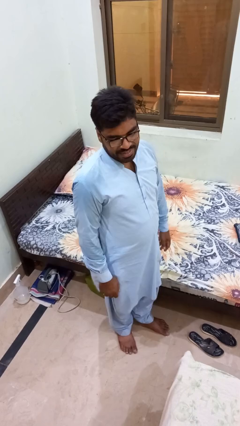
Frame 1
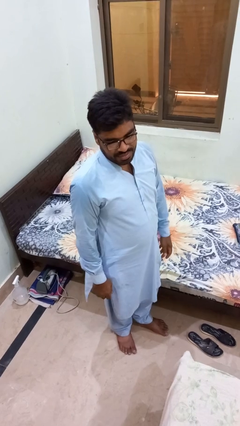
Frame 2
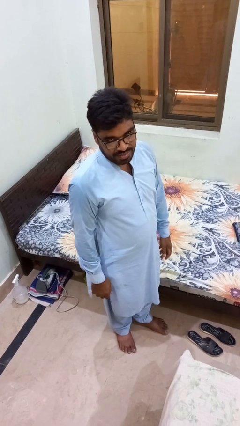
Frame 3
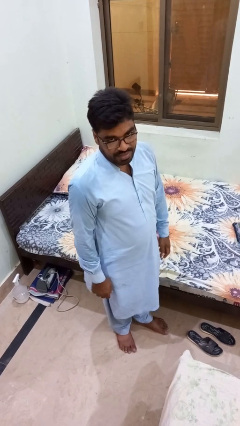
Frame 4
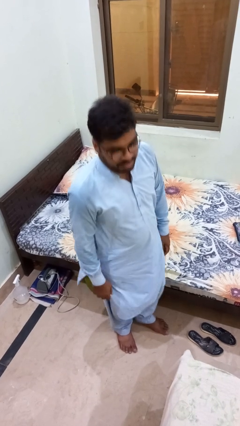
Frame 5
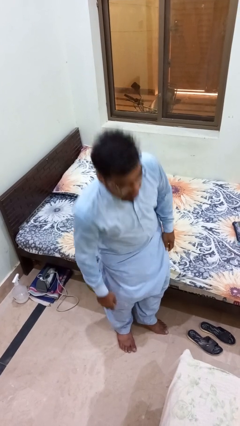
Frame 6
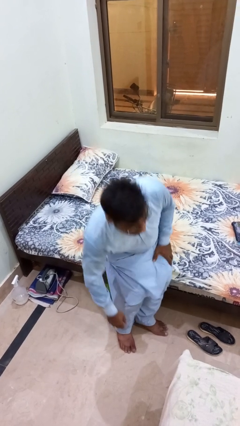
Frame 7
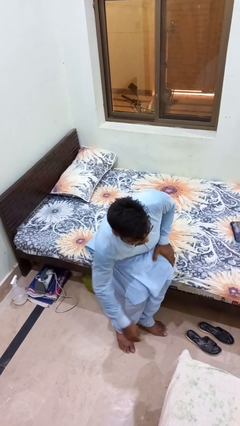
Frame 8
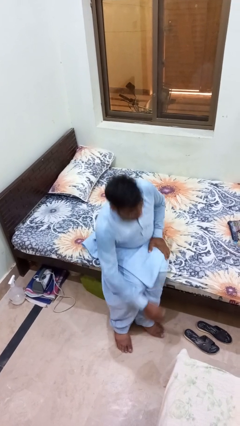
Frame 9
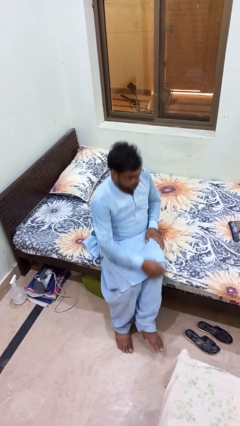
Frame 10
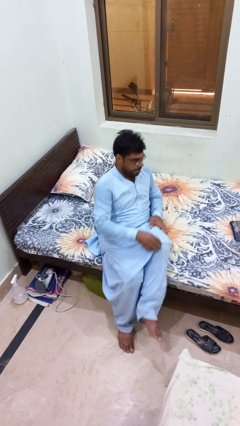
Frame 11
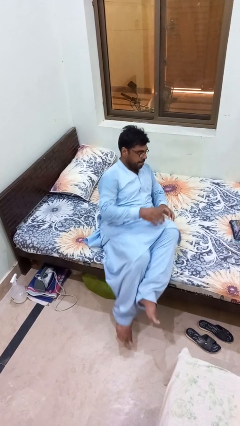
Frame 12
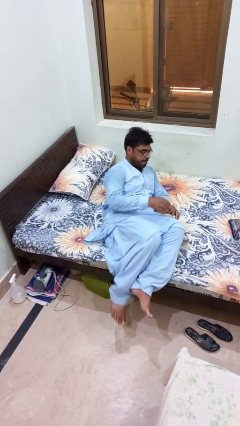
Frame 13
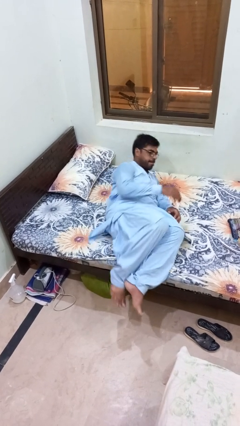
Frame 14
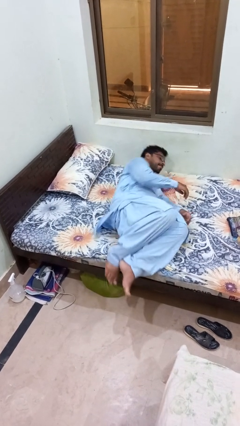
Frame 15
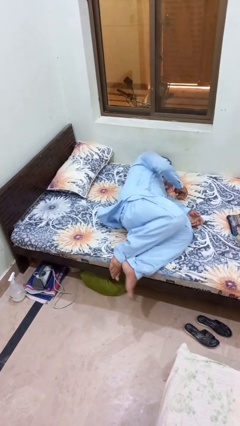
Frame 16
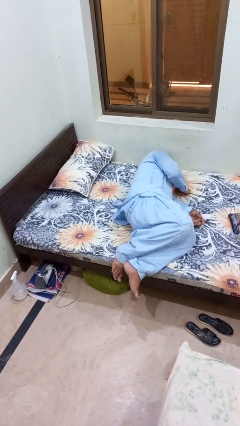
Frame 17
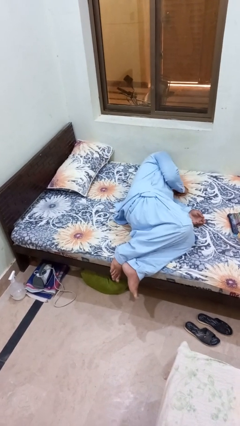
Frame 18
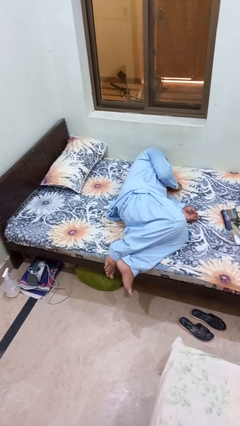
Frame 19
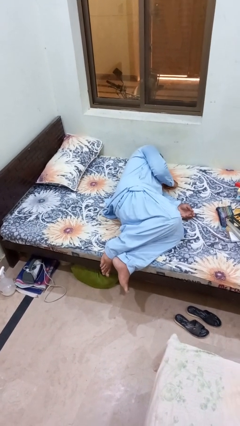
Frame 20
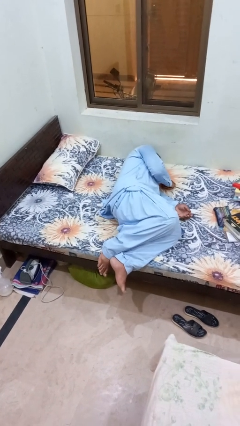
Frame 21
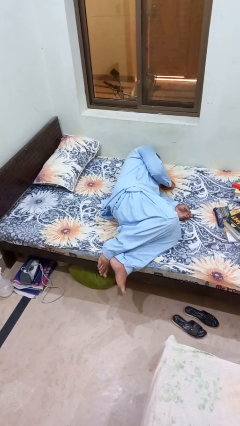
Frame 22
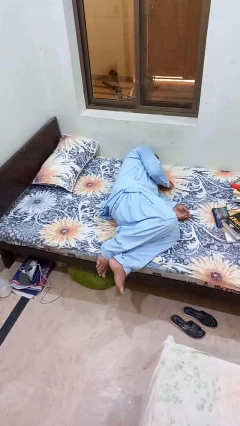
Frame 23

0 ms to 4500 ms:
person lies down on bed

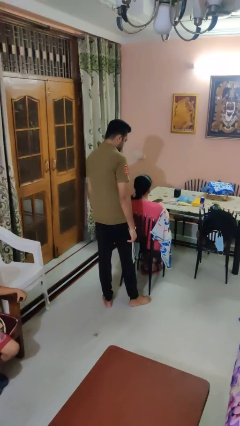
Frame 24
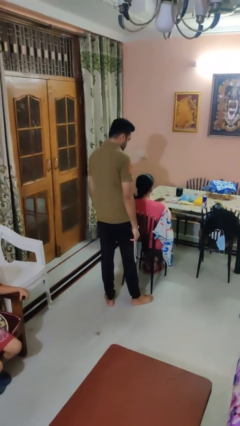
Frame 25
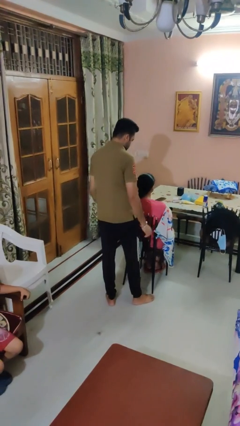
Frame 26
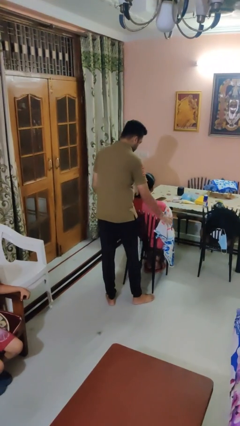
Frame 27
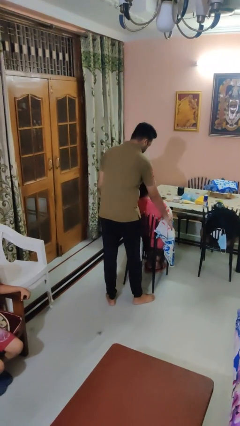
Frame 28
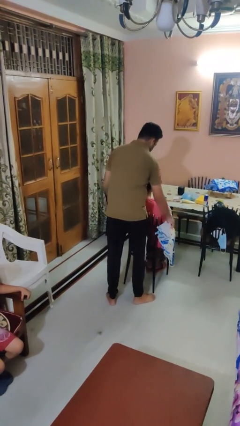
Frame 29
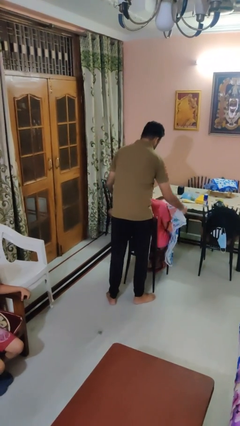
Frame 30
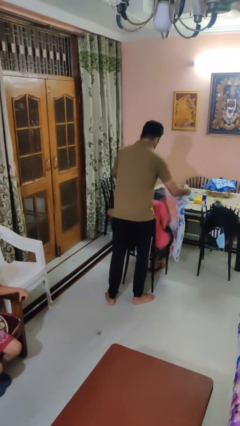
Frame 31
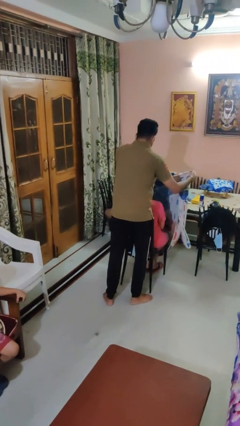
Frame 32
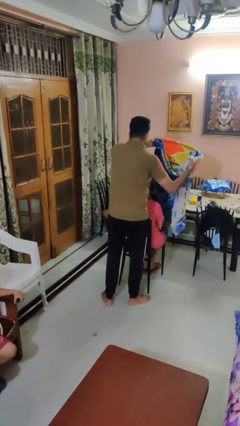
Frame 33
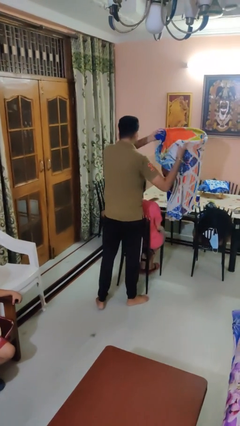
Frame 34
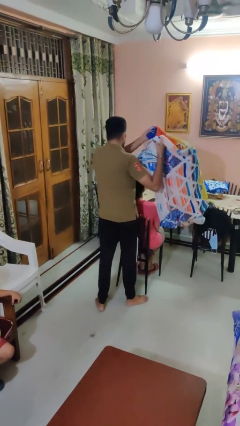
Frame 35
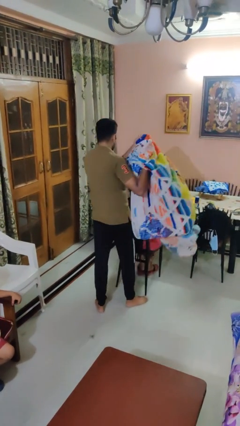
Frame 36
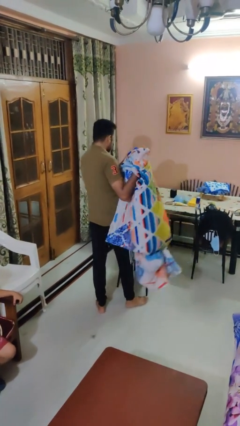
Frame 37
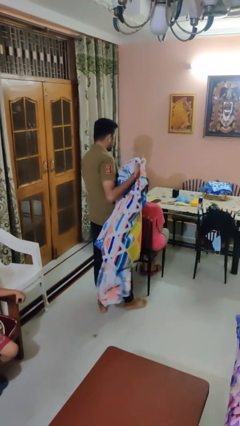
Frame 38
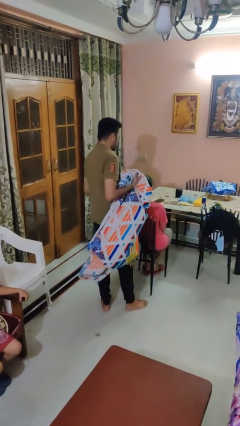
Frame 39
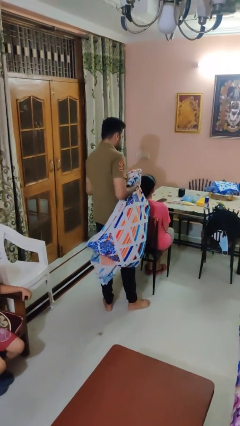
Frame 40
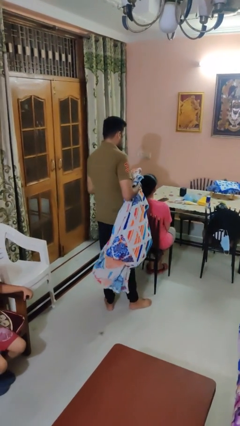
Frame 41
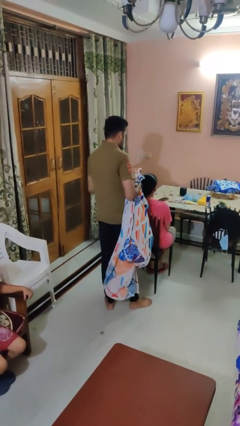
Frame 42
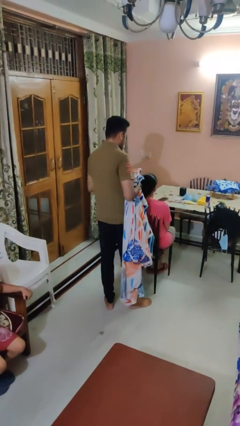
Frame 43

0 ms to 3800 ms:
person uncovers friend with blanket

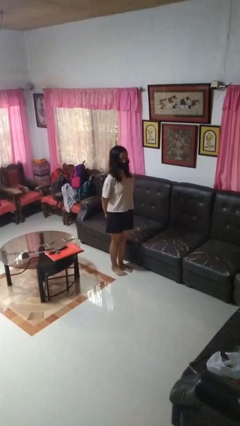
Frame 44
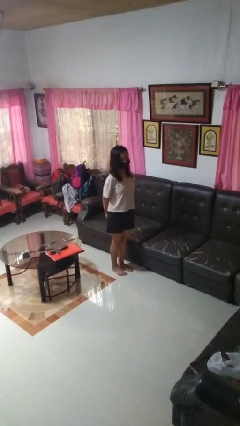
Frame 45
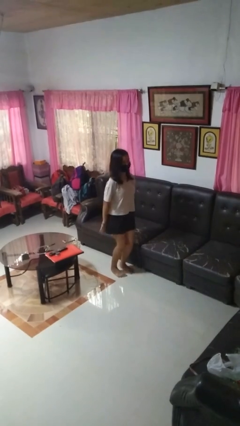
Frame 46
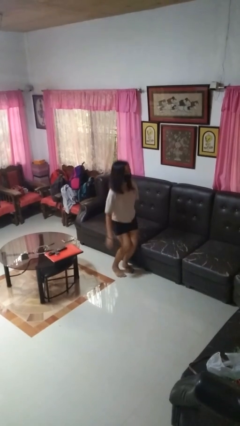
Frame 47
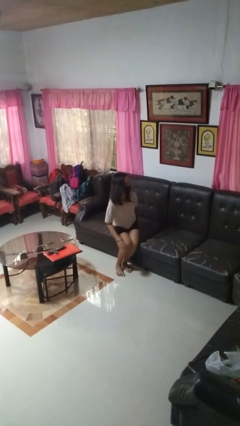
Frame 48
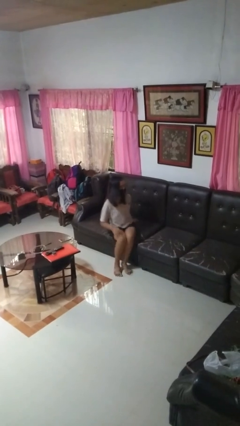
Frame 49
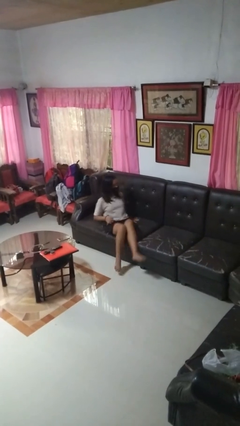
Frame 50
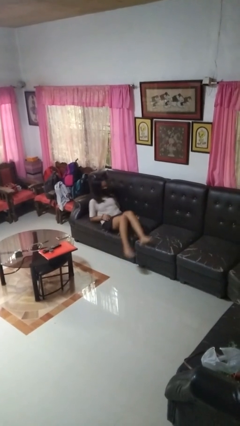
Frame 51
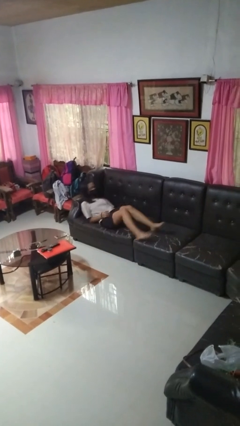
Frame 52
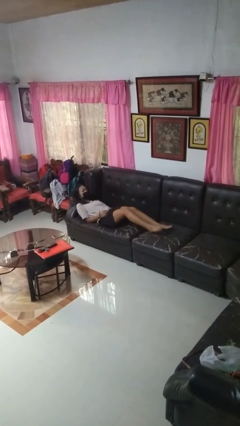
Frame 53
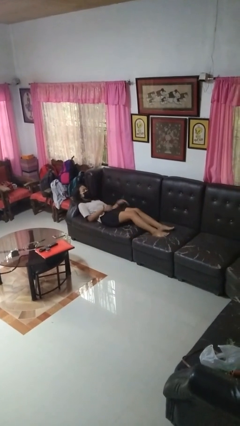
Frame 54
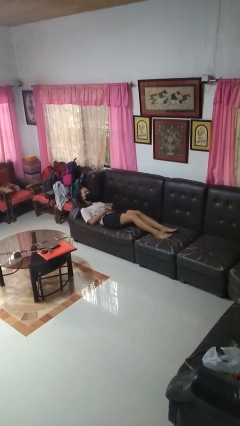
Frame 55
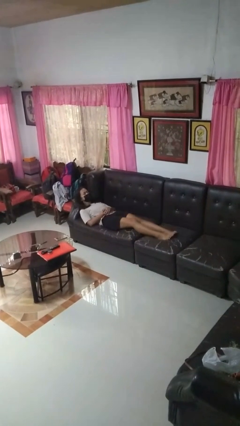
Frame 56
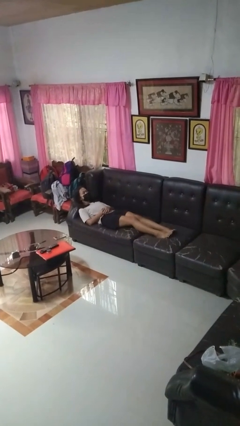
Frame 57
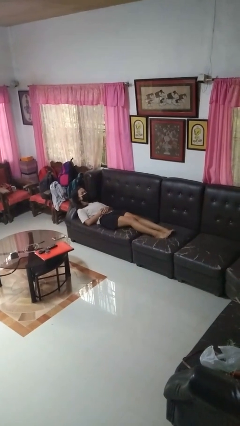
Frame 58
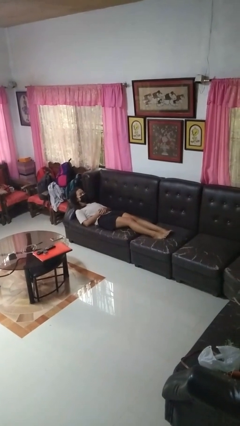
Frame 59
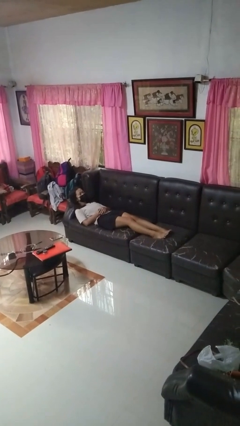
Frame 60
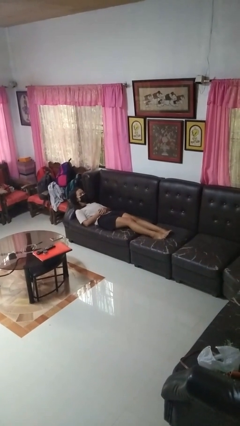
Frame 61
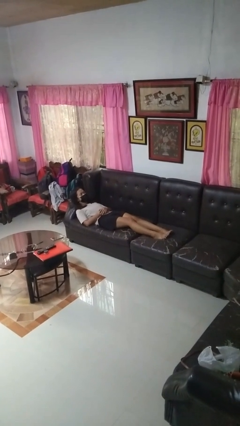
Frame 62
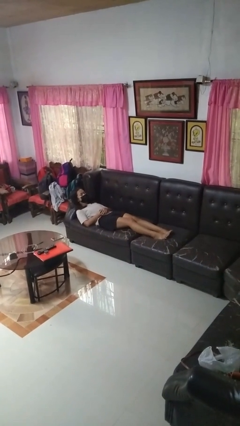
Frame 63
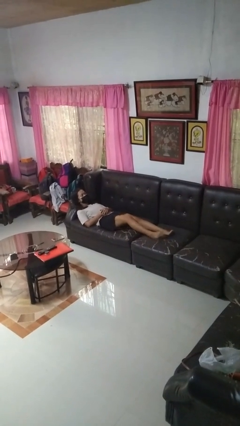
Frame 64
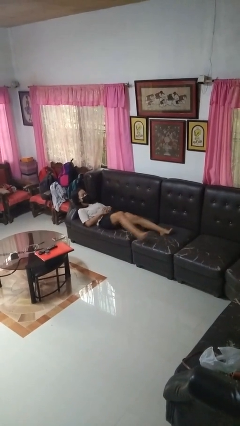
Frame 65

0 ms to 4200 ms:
person lies down on couch

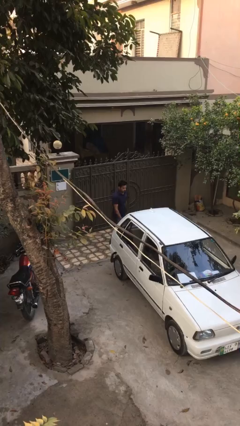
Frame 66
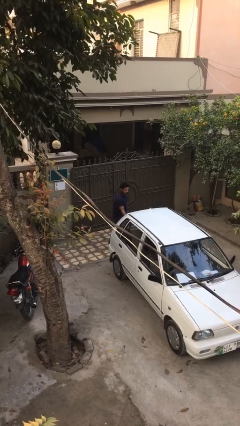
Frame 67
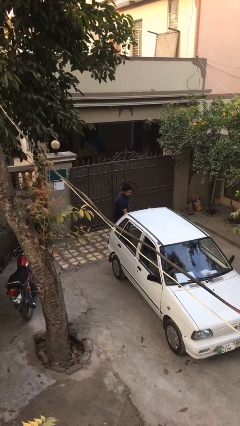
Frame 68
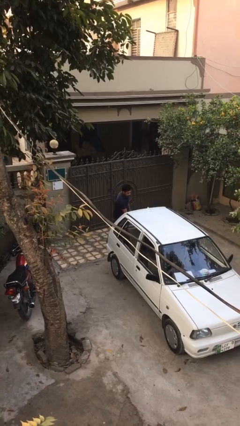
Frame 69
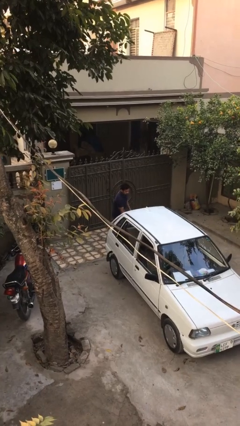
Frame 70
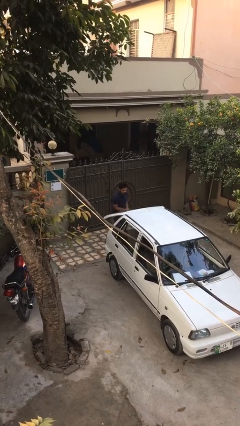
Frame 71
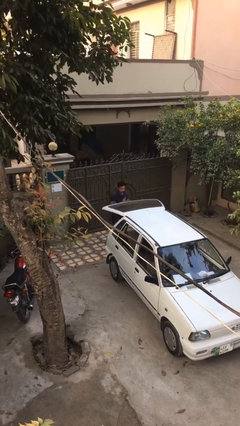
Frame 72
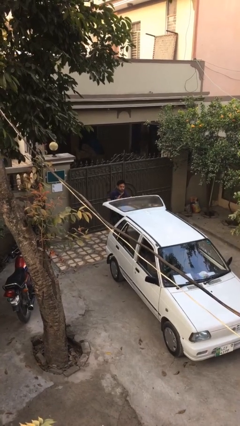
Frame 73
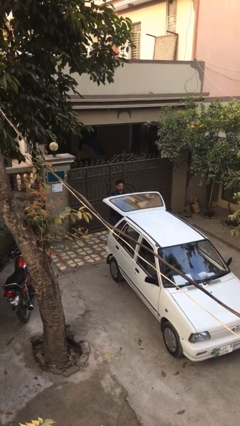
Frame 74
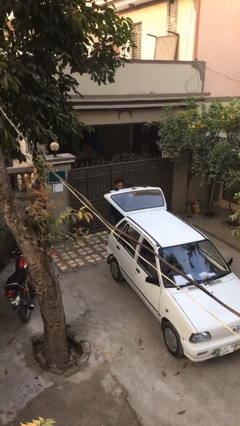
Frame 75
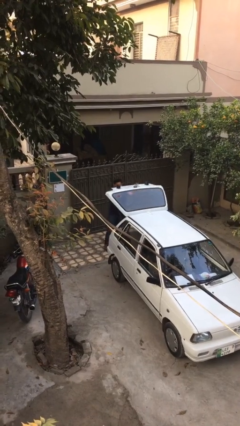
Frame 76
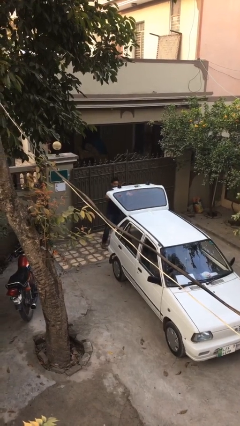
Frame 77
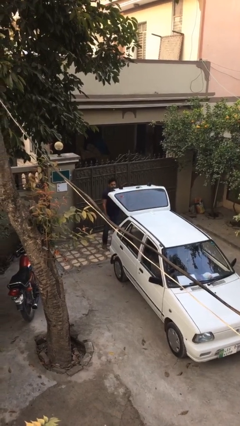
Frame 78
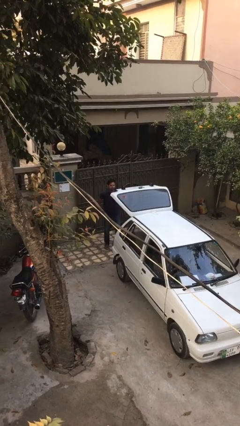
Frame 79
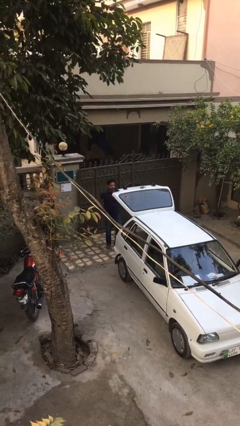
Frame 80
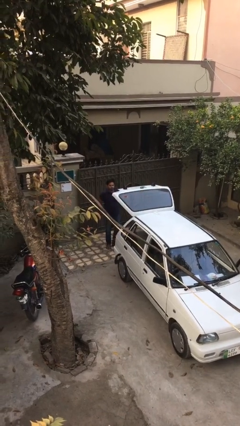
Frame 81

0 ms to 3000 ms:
person opens car trunk

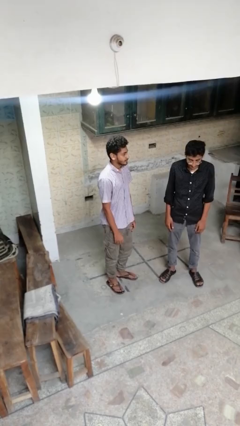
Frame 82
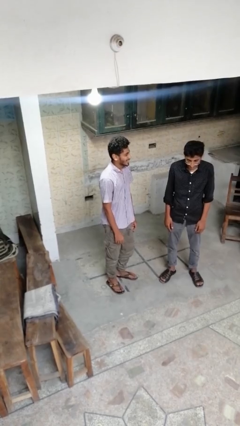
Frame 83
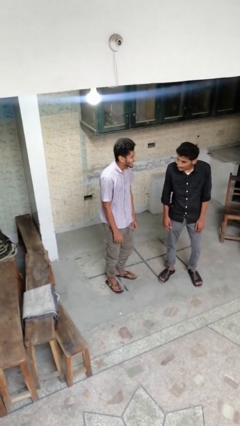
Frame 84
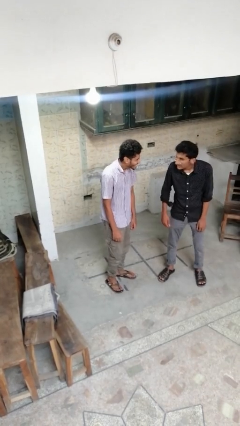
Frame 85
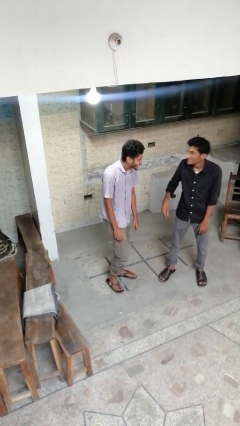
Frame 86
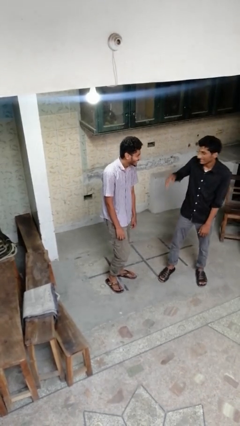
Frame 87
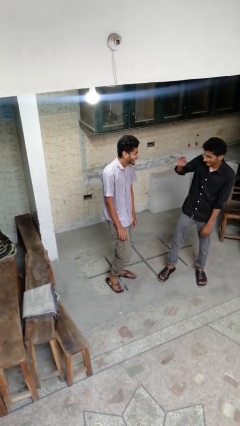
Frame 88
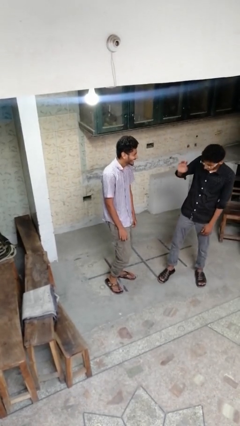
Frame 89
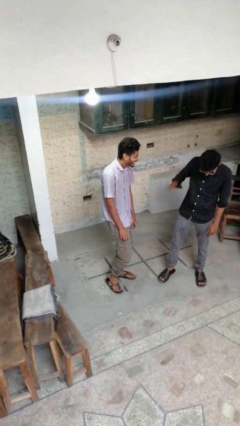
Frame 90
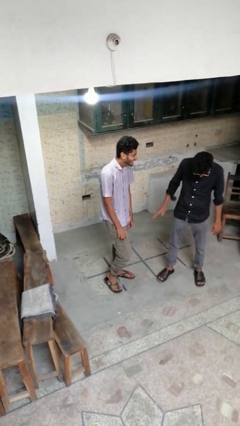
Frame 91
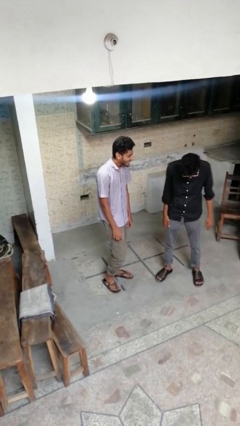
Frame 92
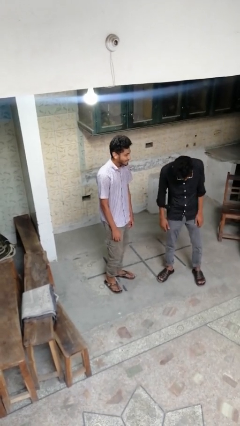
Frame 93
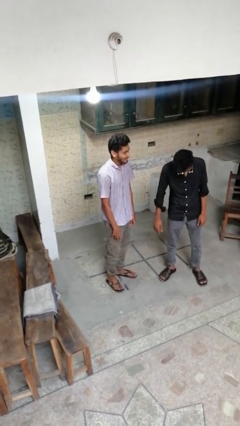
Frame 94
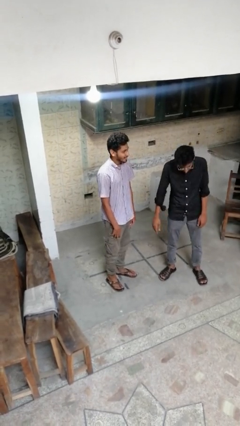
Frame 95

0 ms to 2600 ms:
person laughs with person
